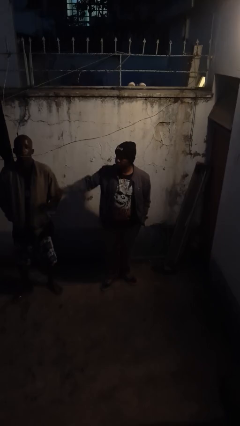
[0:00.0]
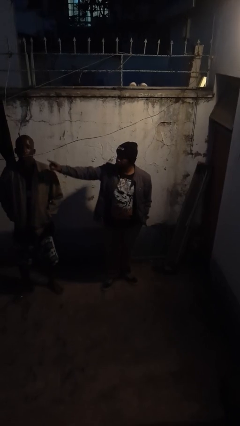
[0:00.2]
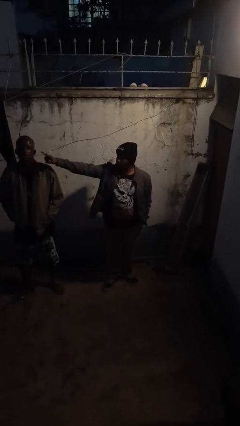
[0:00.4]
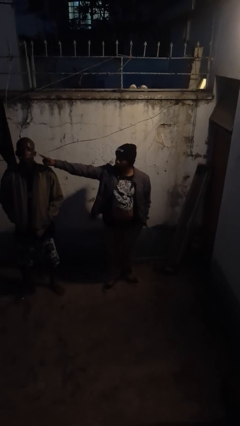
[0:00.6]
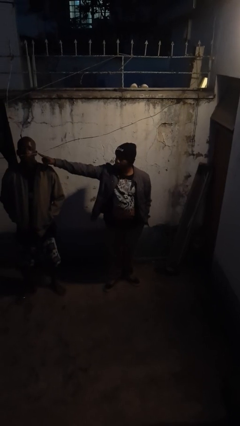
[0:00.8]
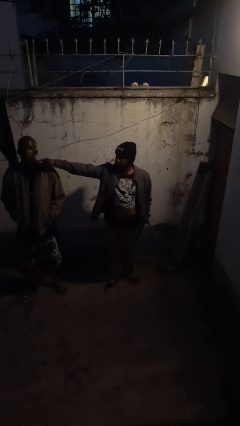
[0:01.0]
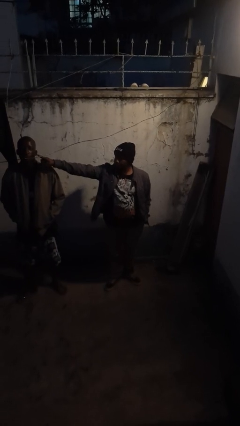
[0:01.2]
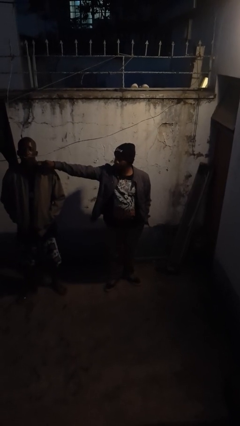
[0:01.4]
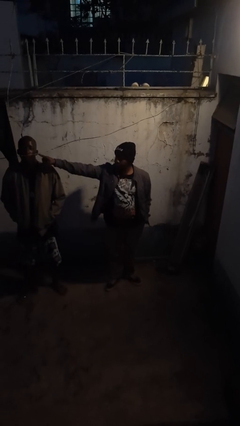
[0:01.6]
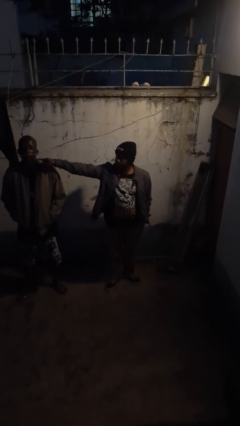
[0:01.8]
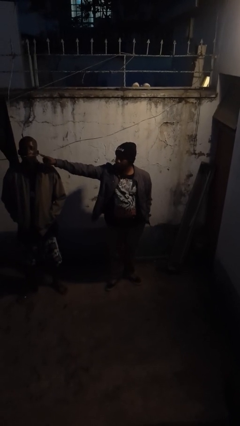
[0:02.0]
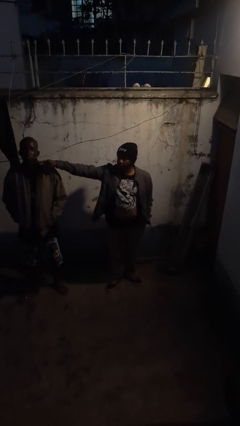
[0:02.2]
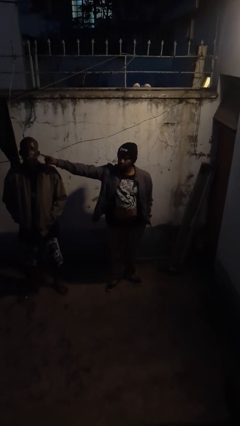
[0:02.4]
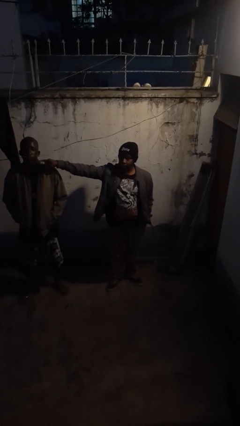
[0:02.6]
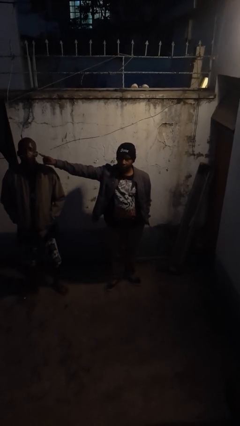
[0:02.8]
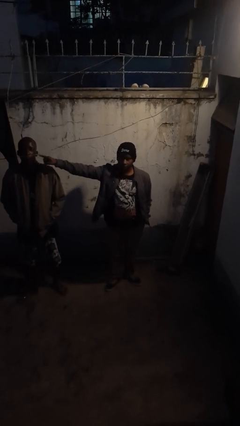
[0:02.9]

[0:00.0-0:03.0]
person touches face of person

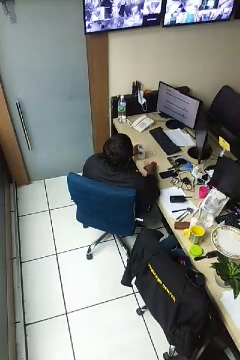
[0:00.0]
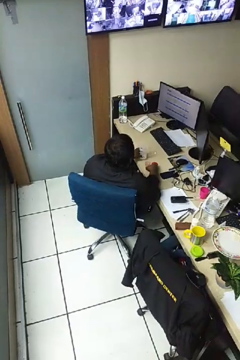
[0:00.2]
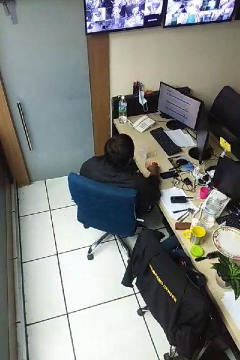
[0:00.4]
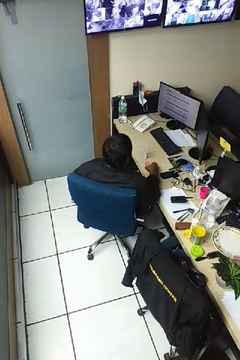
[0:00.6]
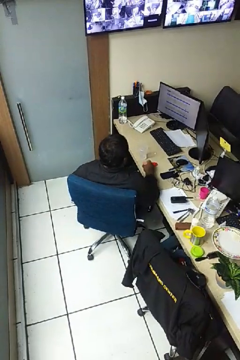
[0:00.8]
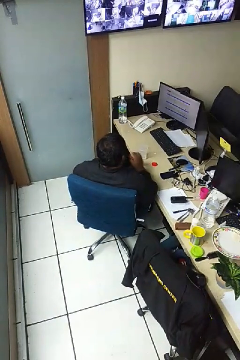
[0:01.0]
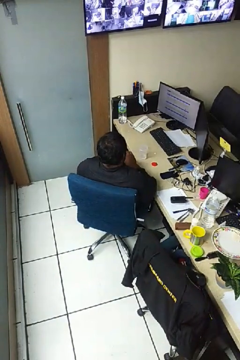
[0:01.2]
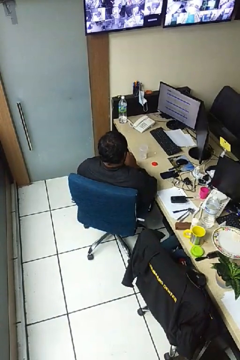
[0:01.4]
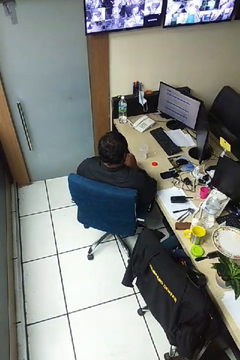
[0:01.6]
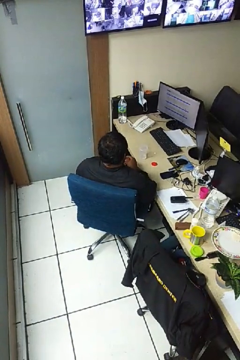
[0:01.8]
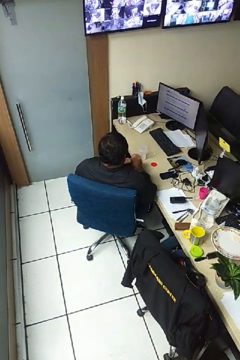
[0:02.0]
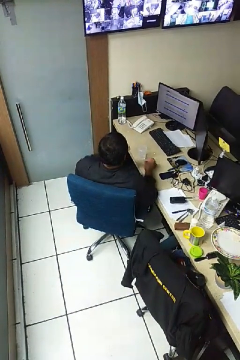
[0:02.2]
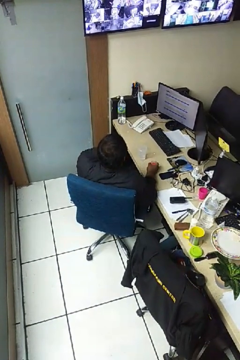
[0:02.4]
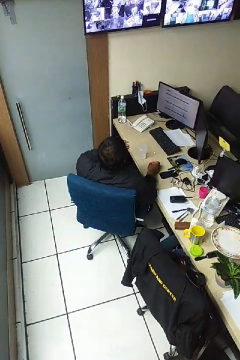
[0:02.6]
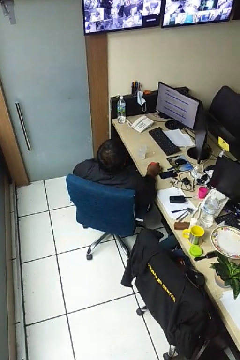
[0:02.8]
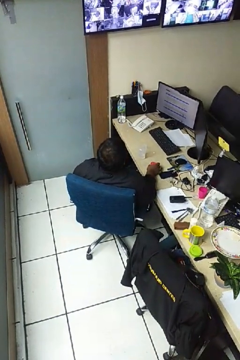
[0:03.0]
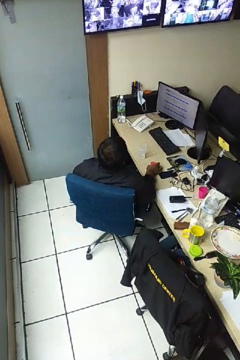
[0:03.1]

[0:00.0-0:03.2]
person takes medicine pills

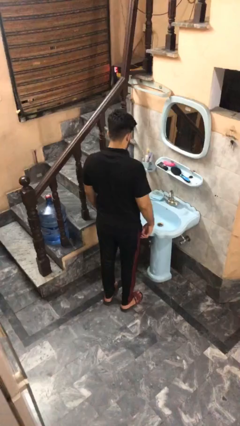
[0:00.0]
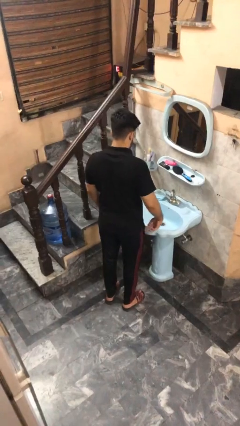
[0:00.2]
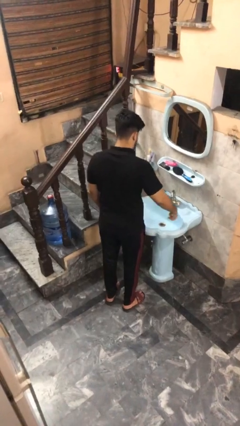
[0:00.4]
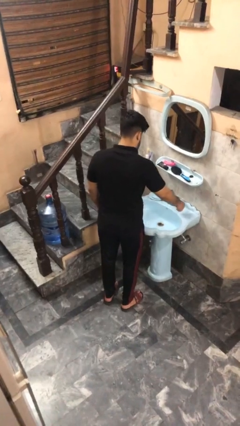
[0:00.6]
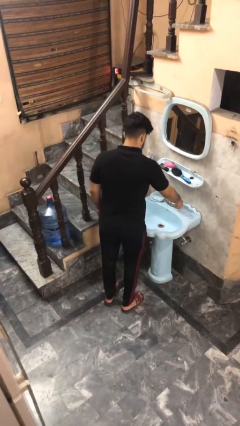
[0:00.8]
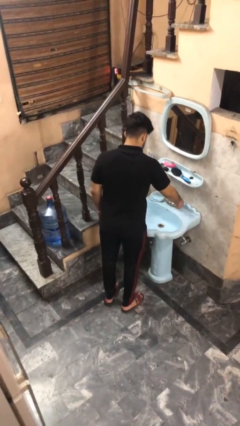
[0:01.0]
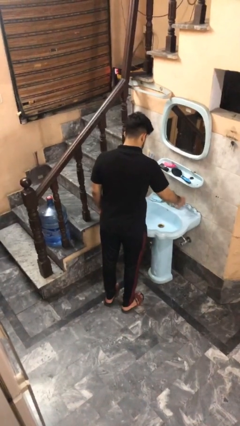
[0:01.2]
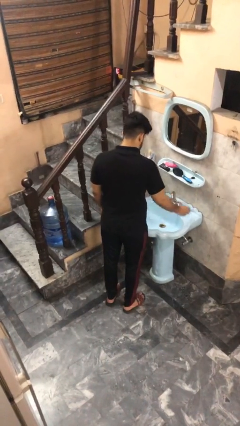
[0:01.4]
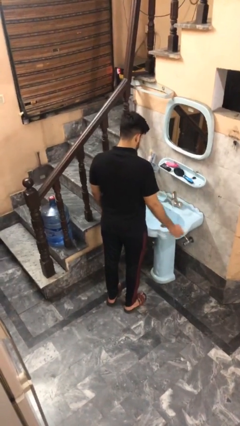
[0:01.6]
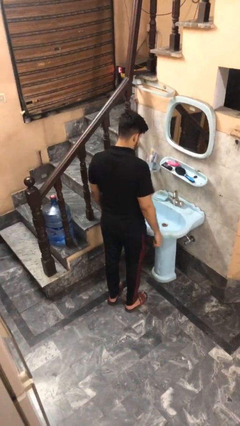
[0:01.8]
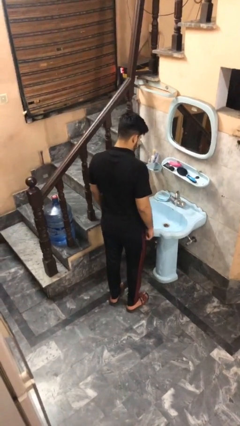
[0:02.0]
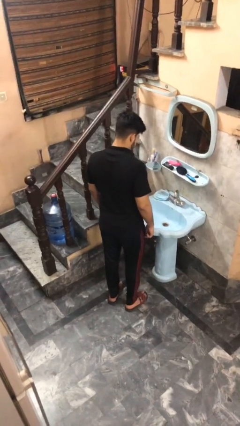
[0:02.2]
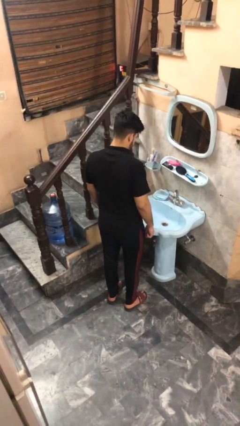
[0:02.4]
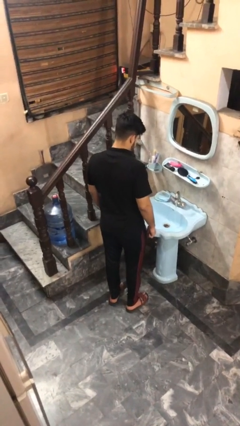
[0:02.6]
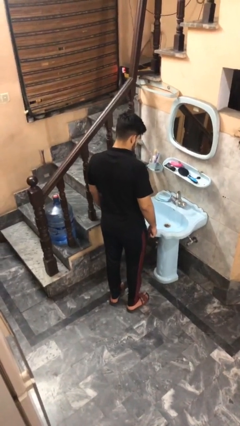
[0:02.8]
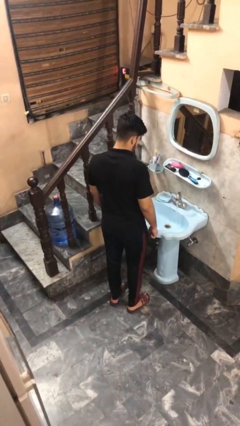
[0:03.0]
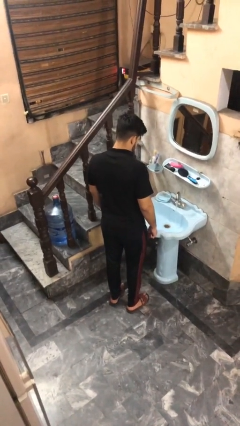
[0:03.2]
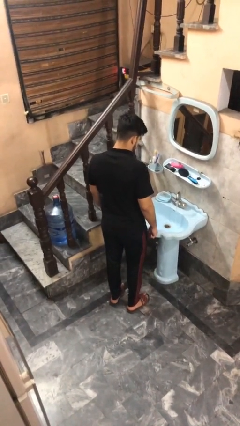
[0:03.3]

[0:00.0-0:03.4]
person turns on faucet

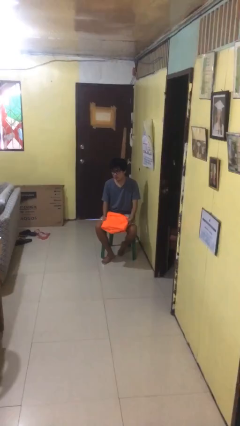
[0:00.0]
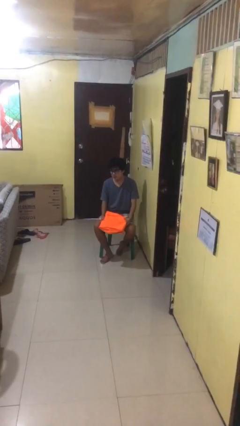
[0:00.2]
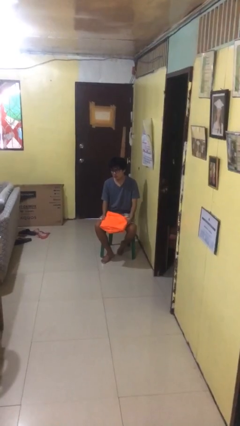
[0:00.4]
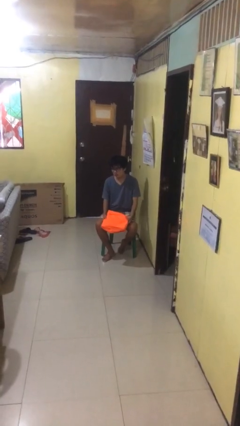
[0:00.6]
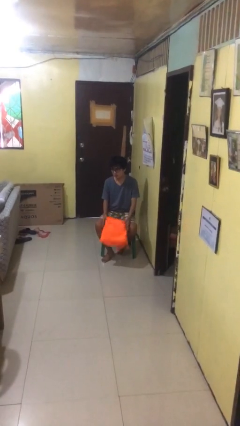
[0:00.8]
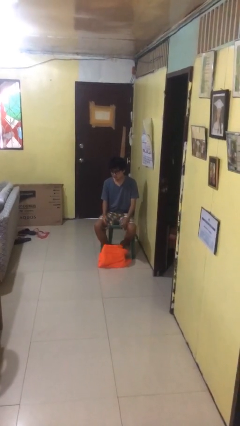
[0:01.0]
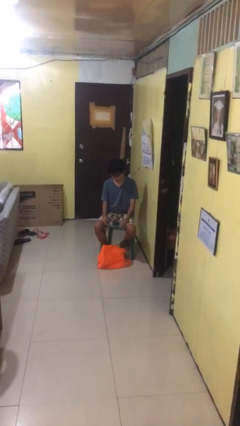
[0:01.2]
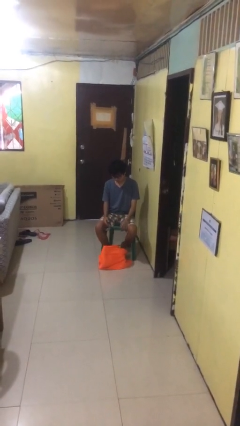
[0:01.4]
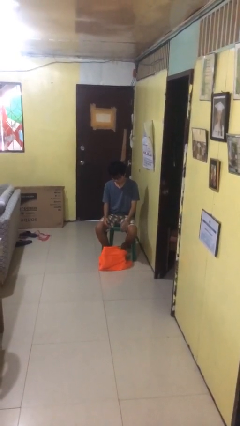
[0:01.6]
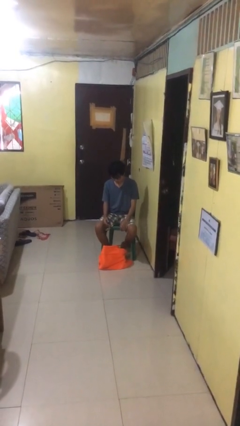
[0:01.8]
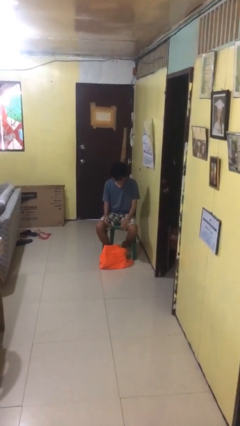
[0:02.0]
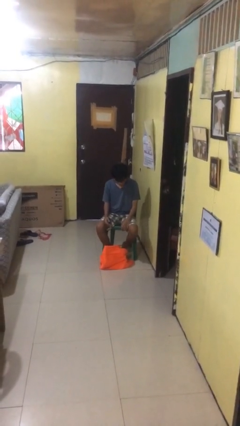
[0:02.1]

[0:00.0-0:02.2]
person drops object

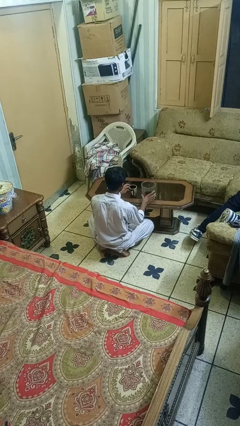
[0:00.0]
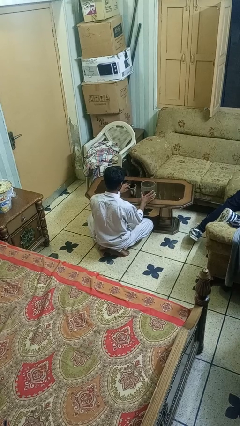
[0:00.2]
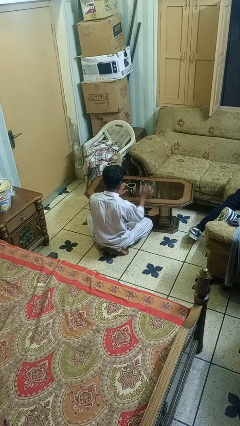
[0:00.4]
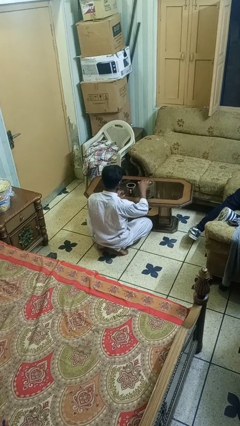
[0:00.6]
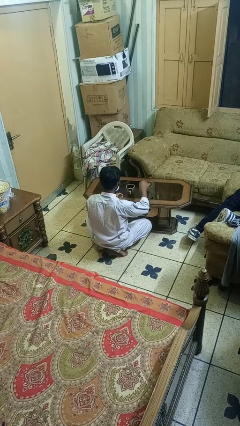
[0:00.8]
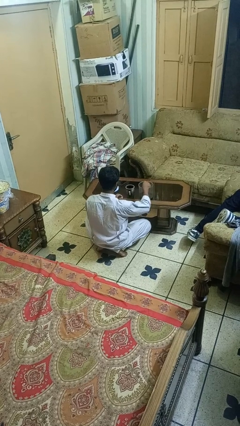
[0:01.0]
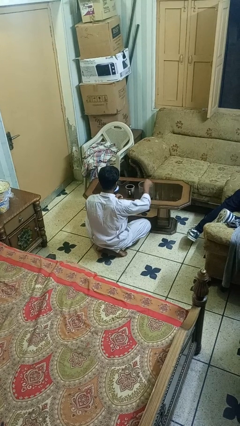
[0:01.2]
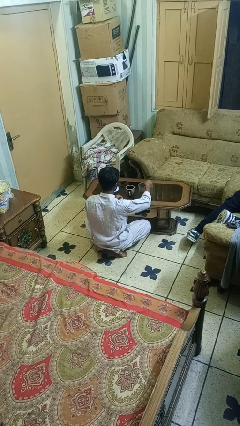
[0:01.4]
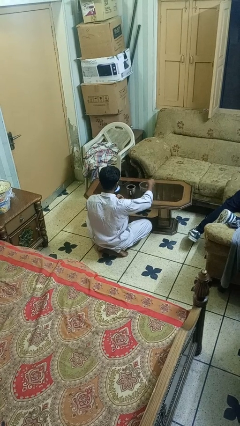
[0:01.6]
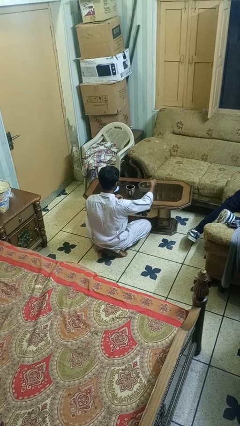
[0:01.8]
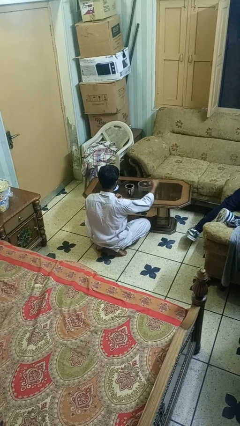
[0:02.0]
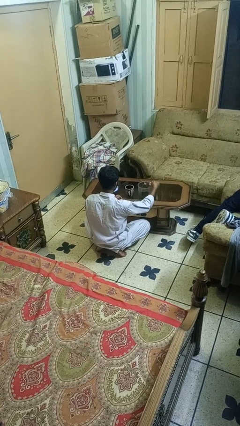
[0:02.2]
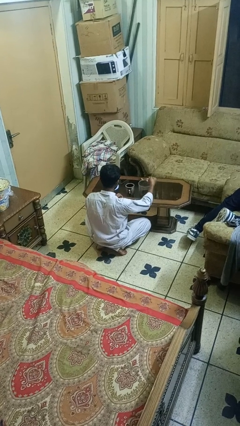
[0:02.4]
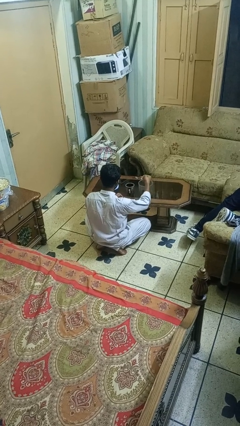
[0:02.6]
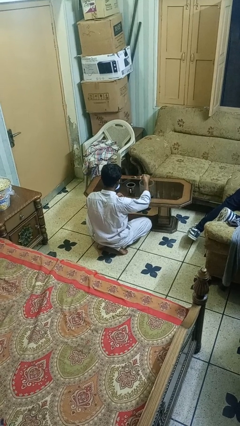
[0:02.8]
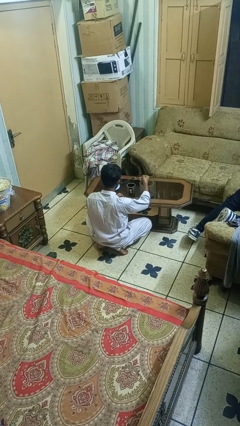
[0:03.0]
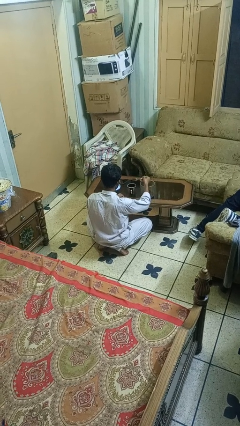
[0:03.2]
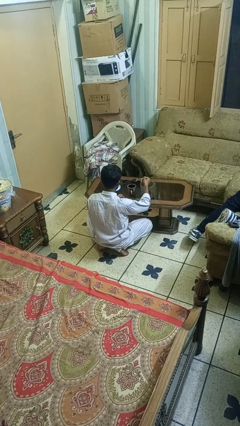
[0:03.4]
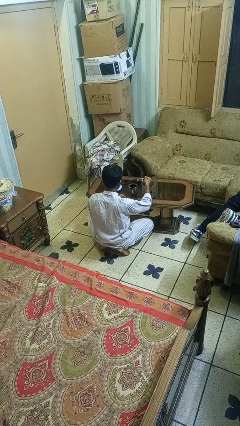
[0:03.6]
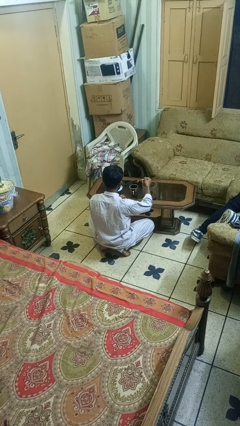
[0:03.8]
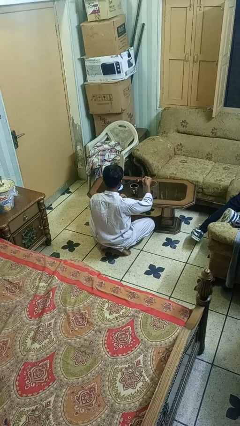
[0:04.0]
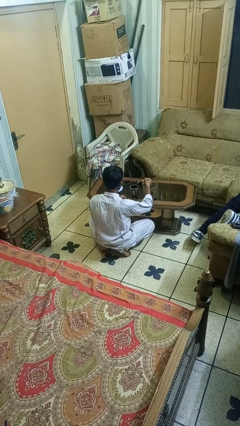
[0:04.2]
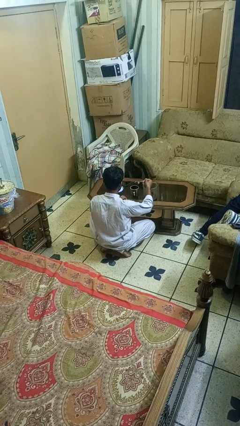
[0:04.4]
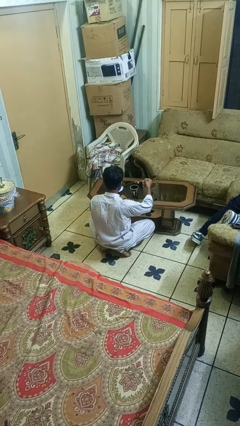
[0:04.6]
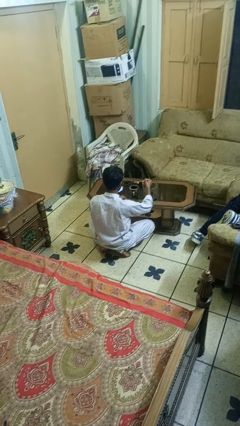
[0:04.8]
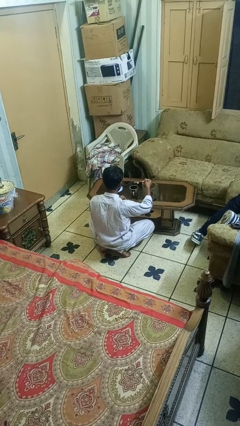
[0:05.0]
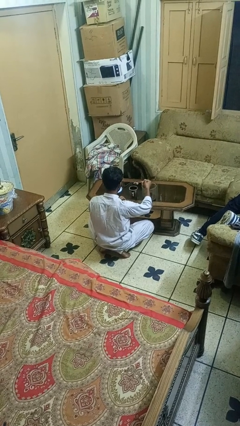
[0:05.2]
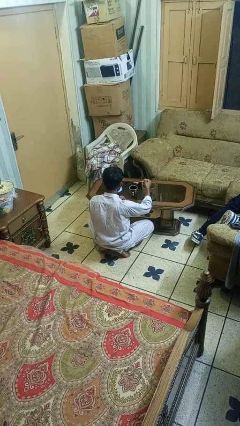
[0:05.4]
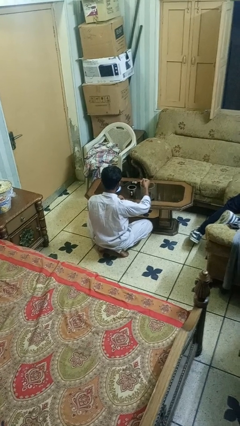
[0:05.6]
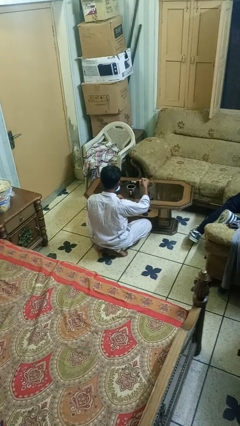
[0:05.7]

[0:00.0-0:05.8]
person pours coffee into mug

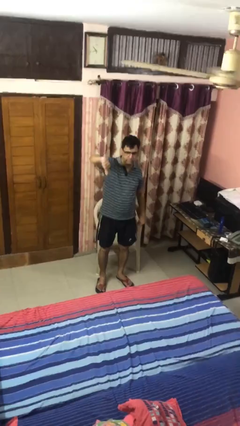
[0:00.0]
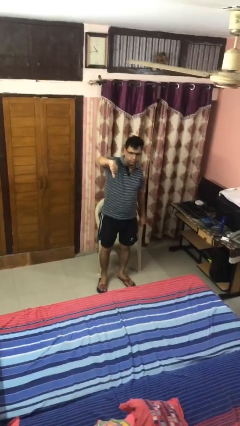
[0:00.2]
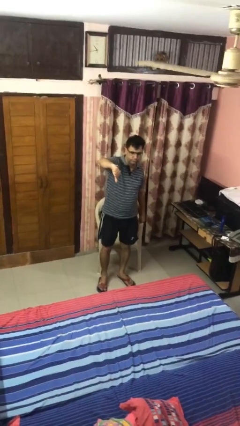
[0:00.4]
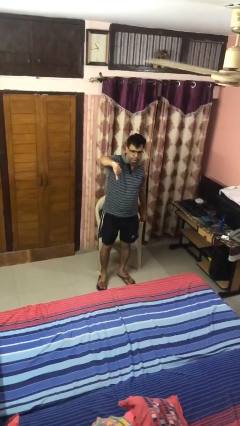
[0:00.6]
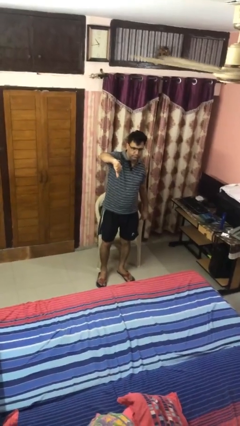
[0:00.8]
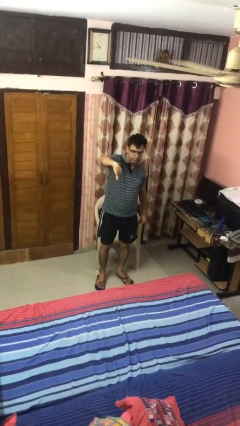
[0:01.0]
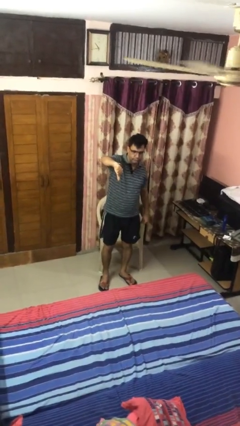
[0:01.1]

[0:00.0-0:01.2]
person gestures thumbs down
